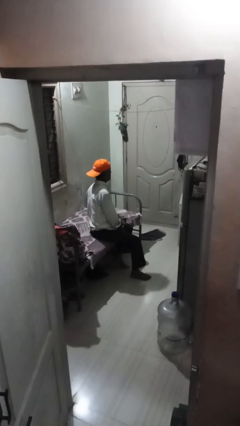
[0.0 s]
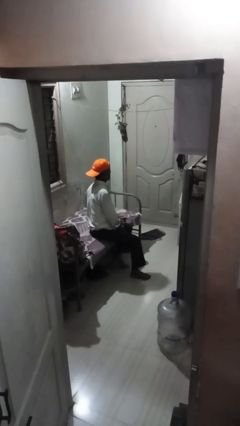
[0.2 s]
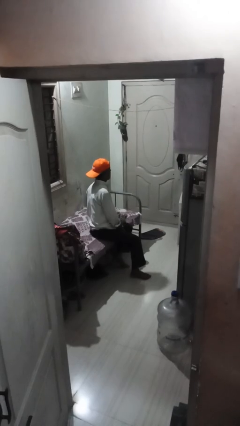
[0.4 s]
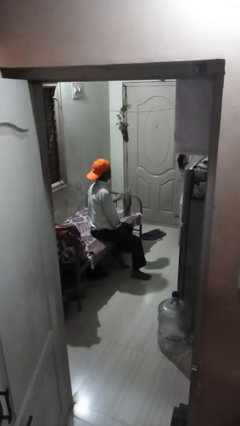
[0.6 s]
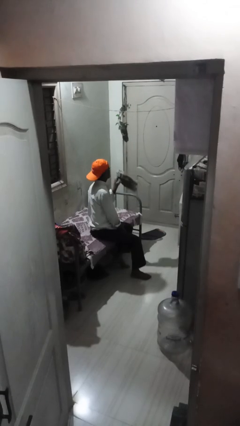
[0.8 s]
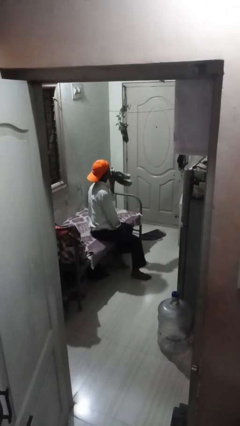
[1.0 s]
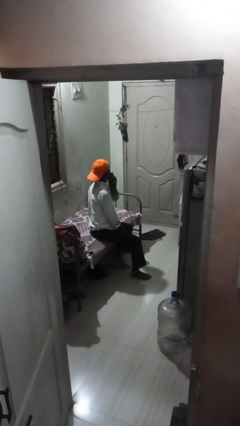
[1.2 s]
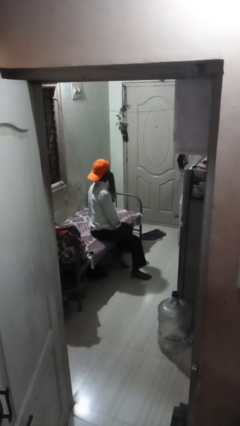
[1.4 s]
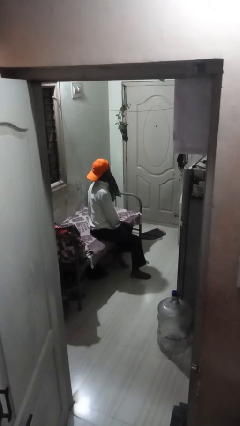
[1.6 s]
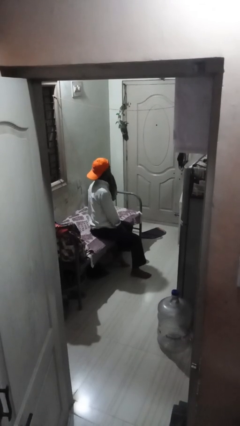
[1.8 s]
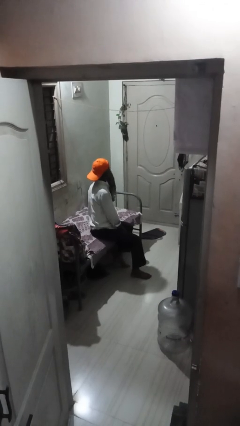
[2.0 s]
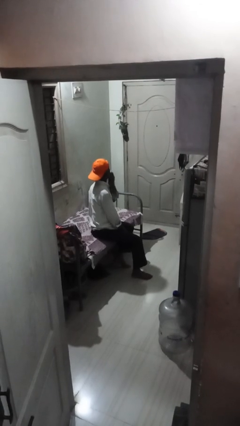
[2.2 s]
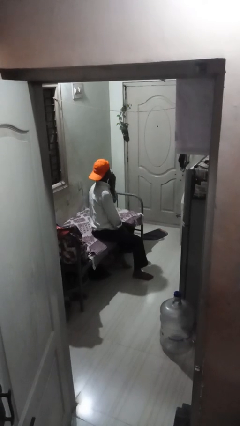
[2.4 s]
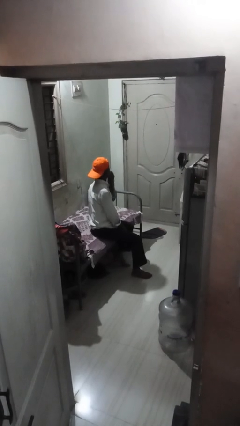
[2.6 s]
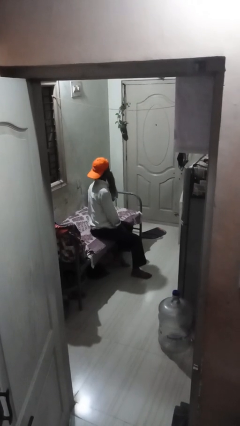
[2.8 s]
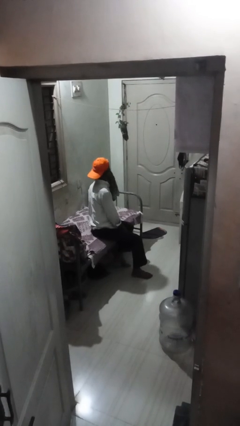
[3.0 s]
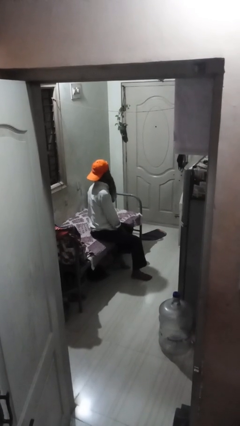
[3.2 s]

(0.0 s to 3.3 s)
person wipes mouth with napkin

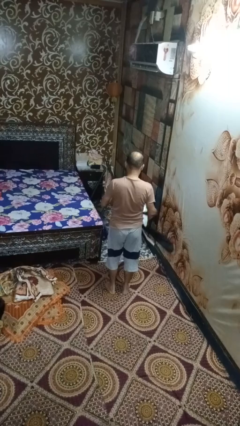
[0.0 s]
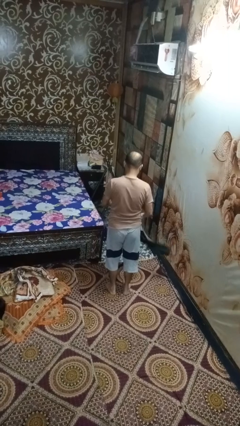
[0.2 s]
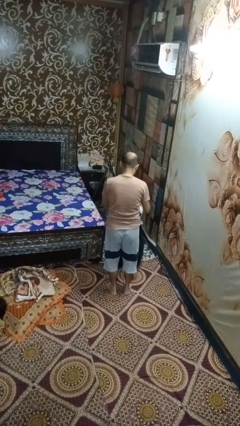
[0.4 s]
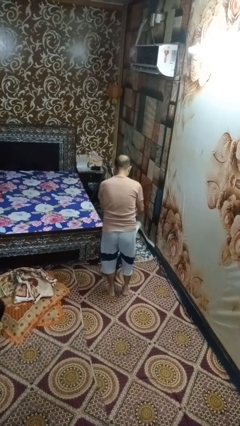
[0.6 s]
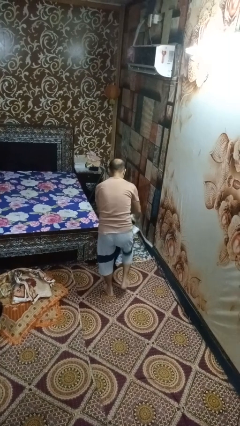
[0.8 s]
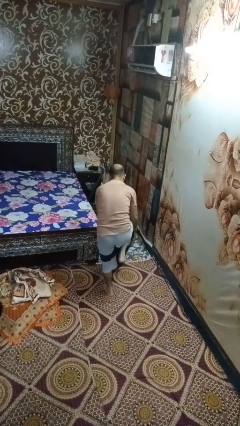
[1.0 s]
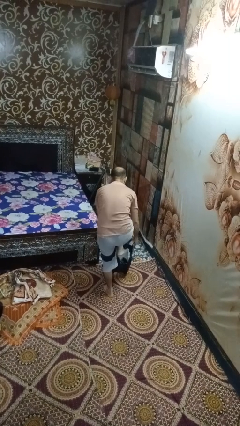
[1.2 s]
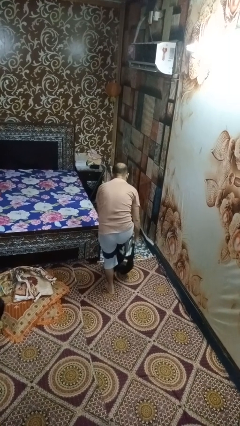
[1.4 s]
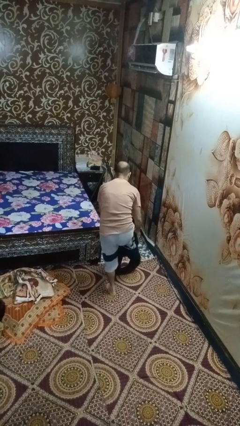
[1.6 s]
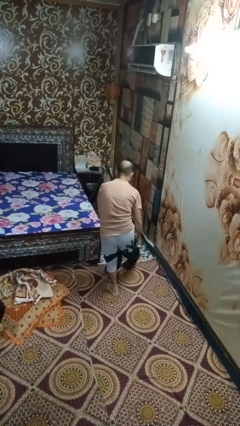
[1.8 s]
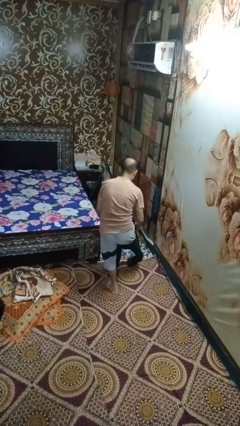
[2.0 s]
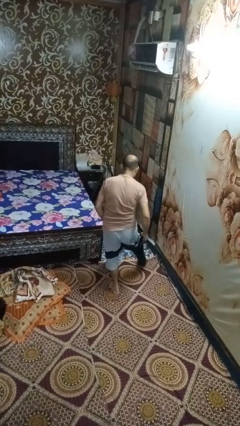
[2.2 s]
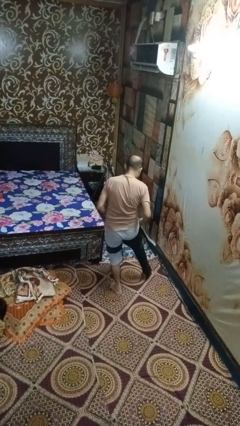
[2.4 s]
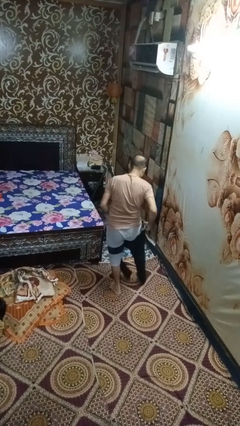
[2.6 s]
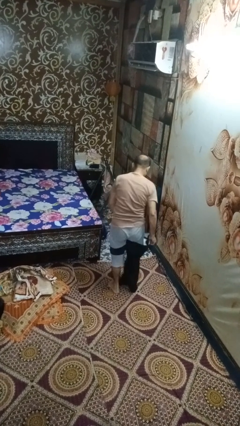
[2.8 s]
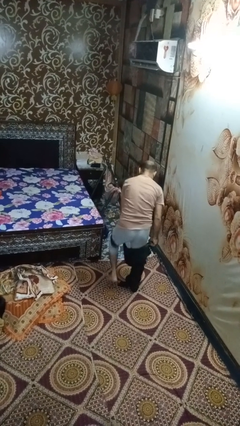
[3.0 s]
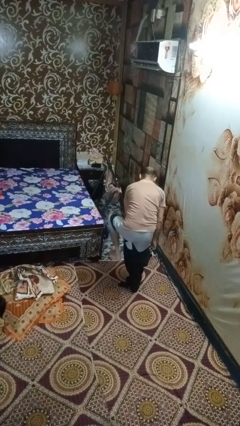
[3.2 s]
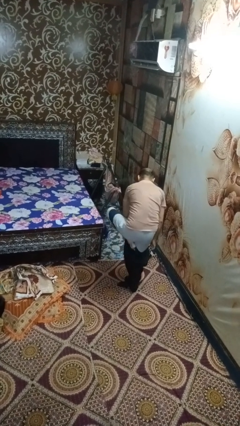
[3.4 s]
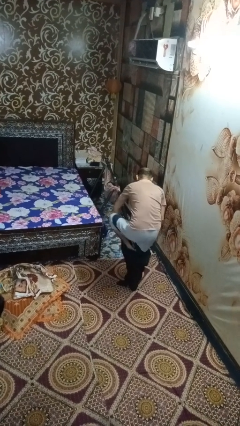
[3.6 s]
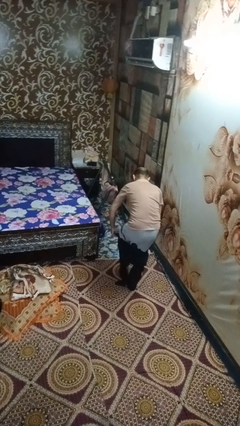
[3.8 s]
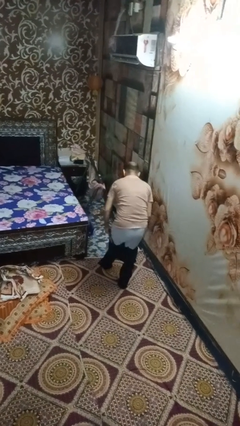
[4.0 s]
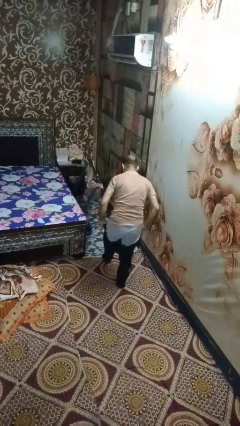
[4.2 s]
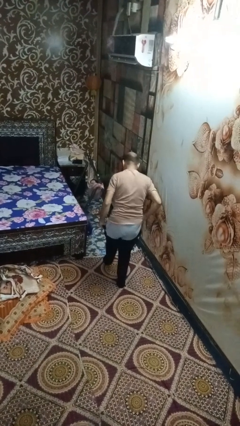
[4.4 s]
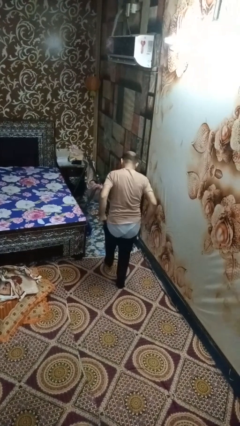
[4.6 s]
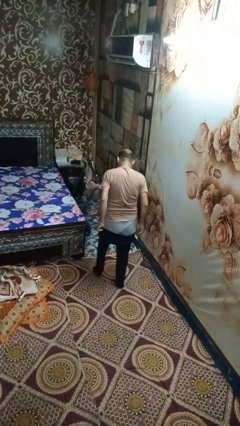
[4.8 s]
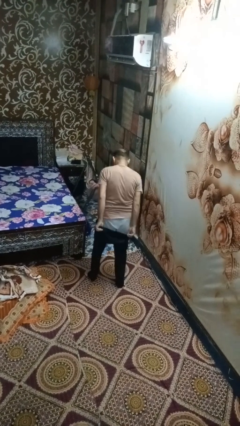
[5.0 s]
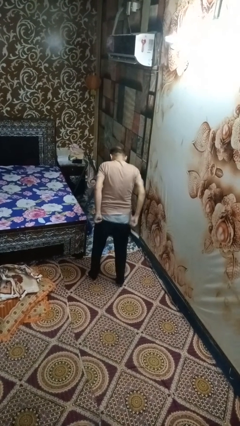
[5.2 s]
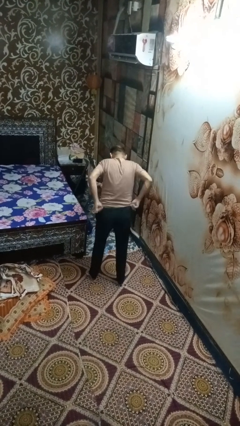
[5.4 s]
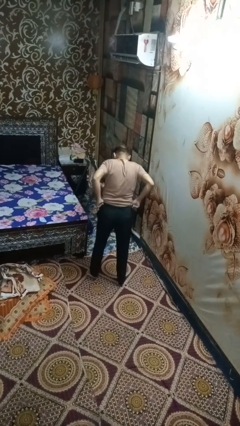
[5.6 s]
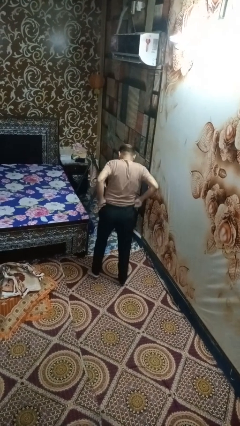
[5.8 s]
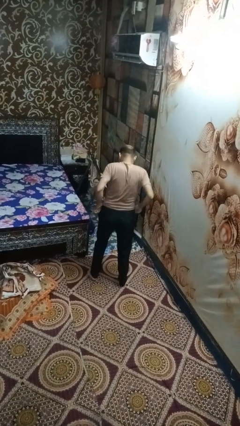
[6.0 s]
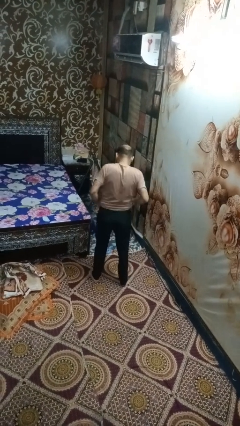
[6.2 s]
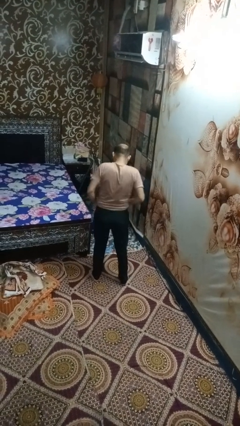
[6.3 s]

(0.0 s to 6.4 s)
person puts on pants

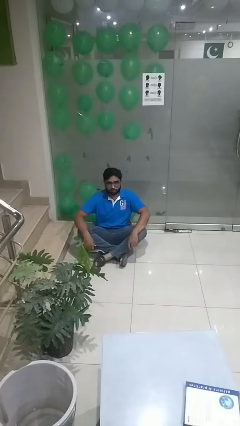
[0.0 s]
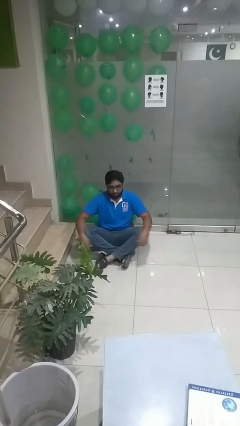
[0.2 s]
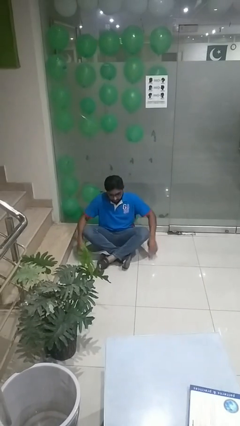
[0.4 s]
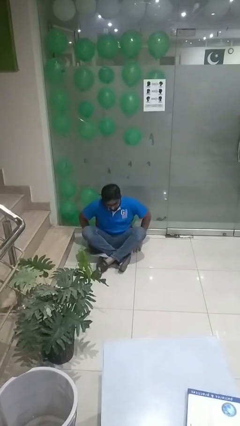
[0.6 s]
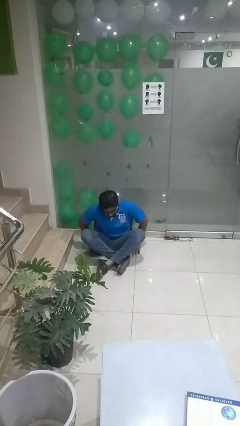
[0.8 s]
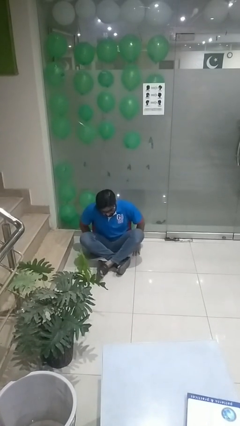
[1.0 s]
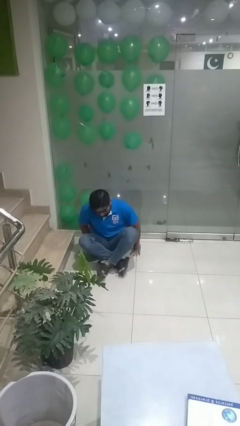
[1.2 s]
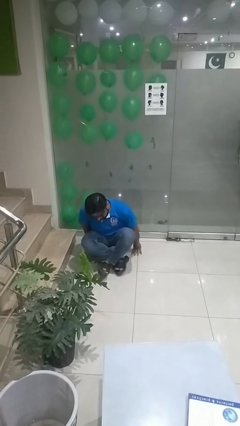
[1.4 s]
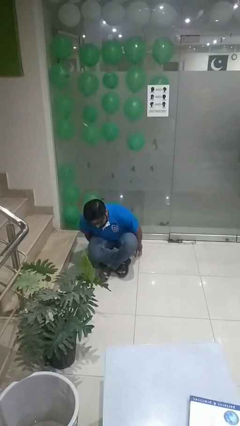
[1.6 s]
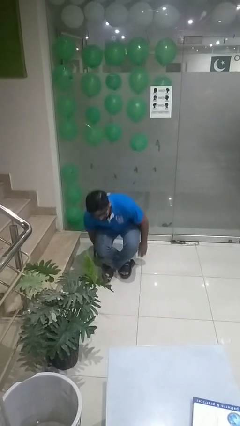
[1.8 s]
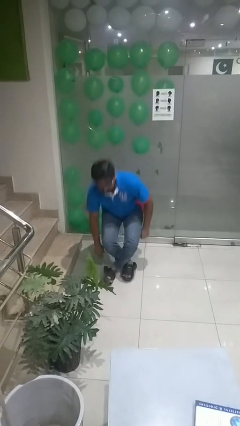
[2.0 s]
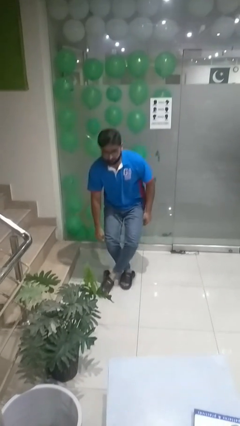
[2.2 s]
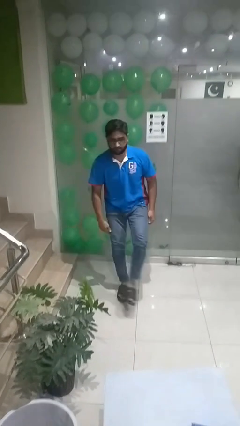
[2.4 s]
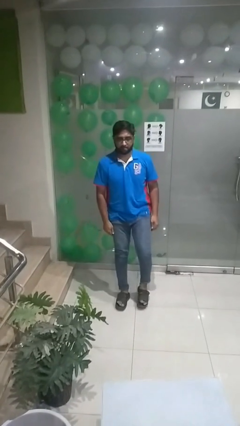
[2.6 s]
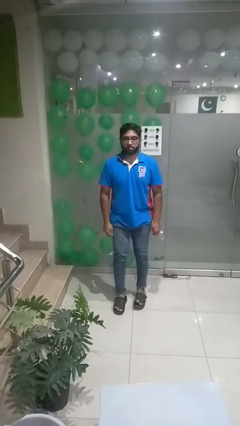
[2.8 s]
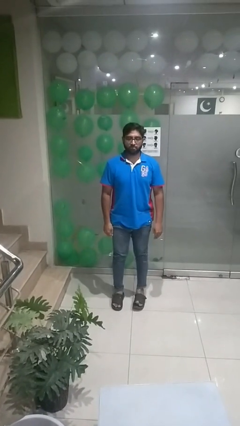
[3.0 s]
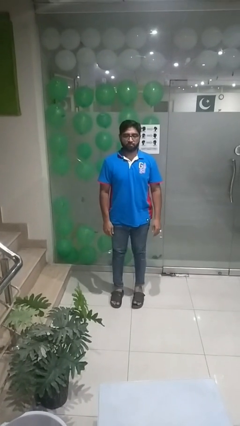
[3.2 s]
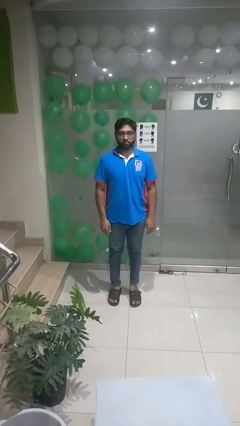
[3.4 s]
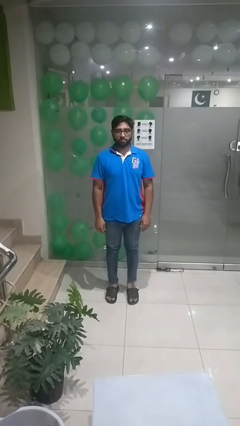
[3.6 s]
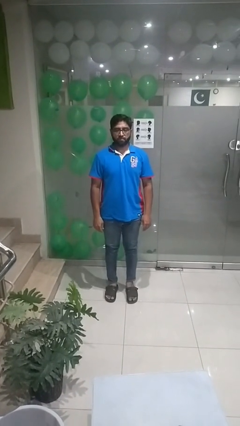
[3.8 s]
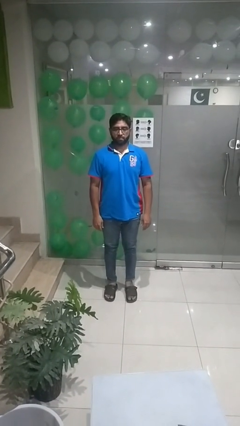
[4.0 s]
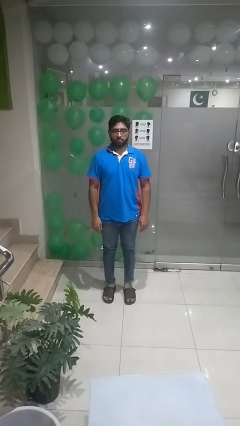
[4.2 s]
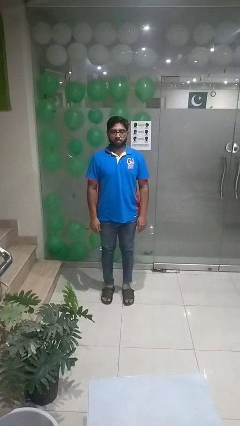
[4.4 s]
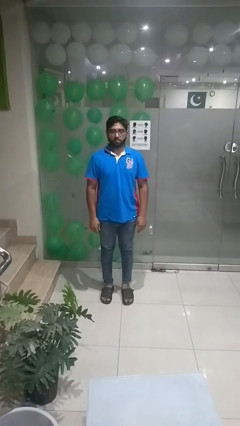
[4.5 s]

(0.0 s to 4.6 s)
person stands up from floor

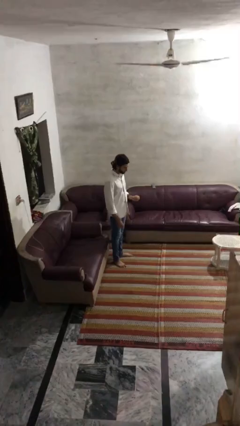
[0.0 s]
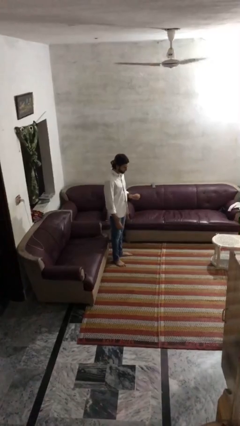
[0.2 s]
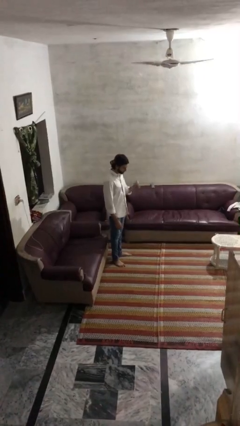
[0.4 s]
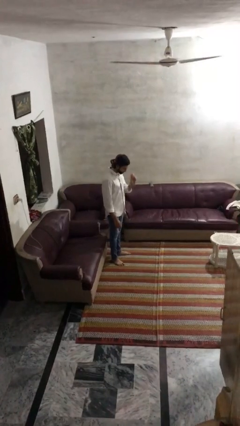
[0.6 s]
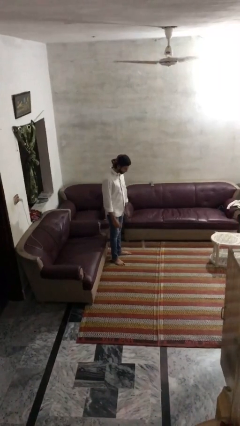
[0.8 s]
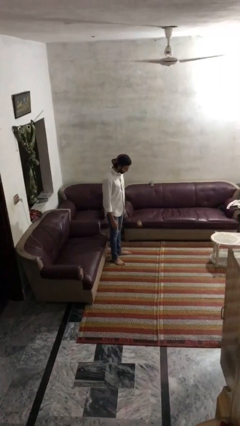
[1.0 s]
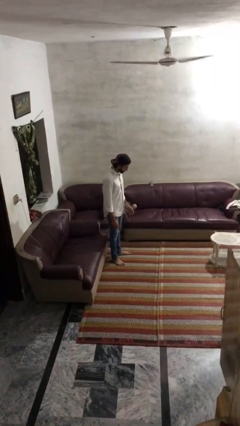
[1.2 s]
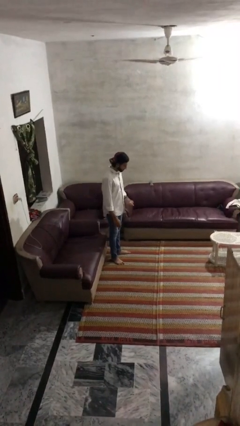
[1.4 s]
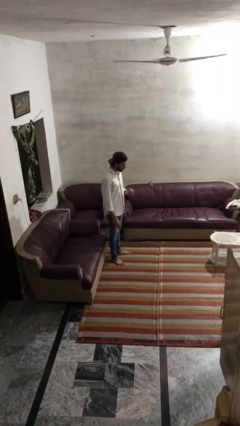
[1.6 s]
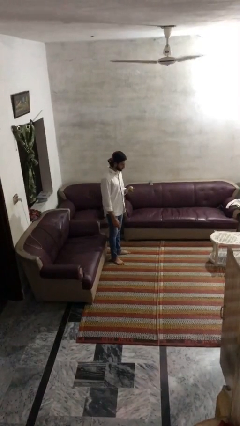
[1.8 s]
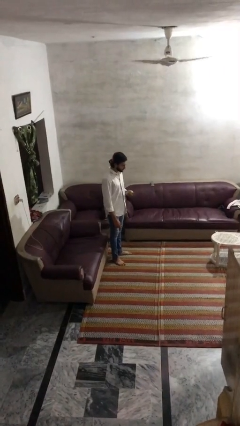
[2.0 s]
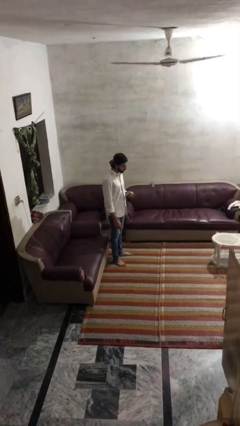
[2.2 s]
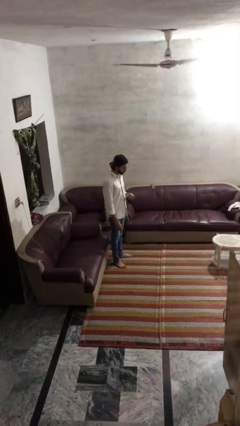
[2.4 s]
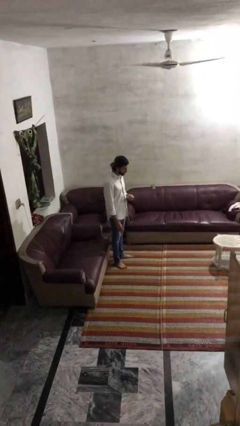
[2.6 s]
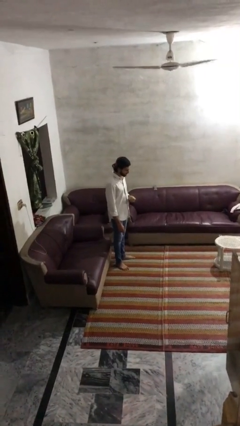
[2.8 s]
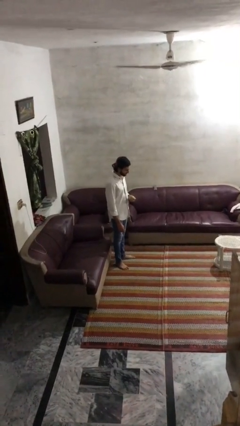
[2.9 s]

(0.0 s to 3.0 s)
person bounces ball on floor

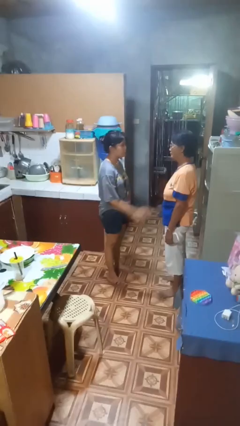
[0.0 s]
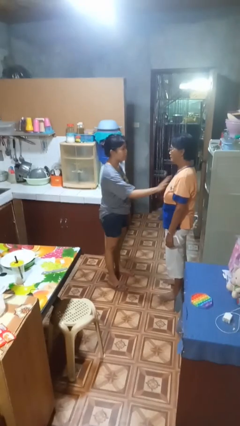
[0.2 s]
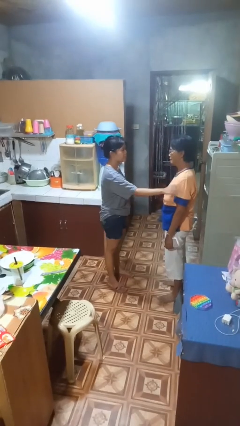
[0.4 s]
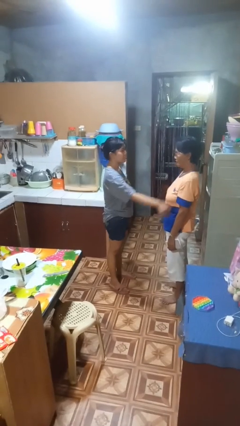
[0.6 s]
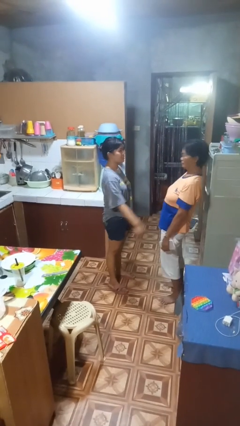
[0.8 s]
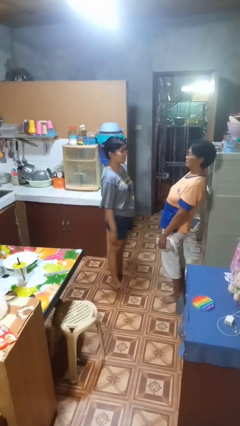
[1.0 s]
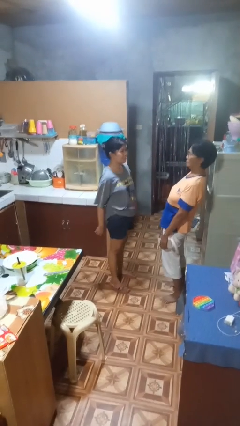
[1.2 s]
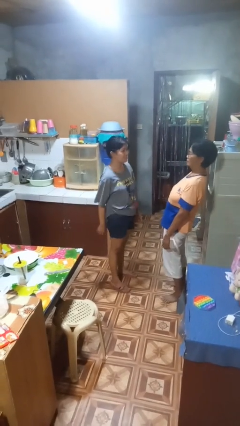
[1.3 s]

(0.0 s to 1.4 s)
person shoves person
